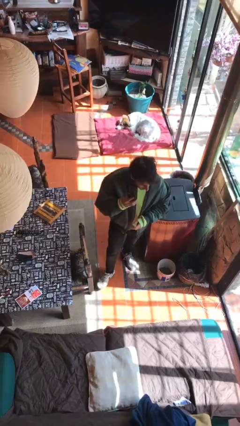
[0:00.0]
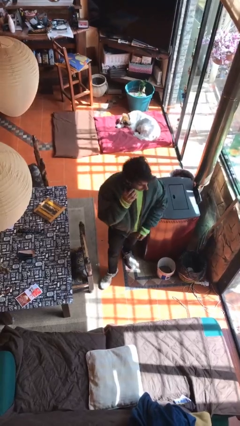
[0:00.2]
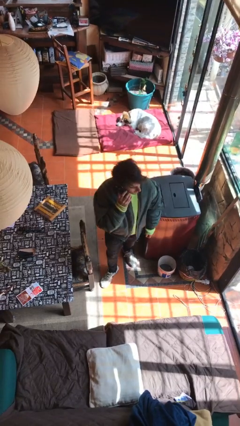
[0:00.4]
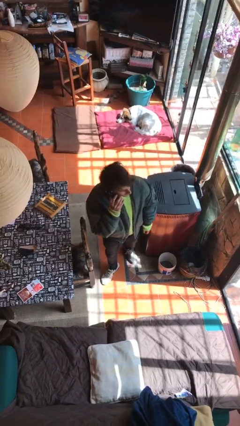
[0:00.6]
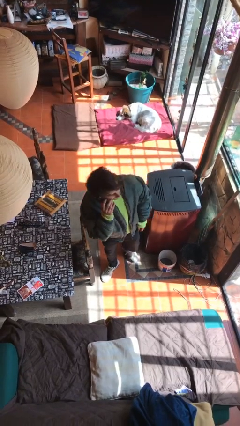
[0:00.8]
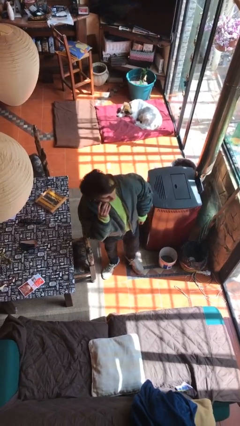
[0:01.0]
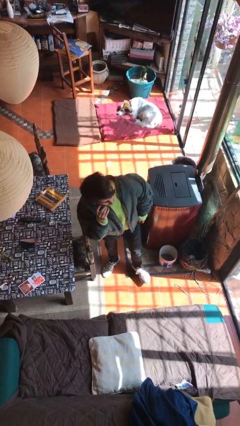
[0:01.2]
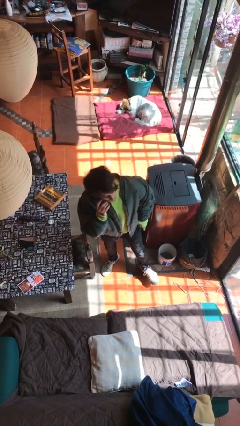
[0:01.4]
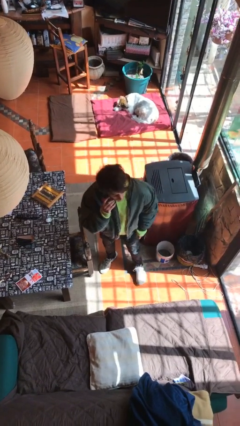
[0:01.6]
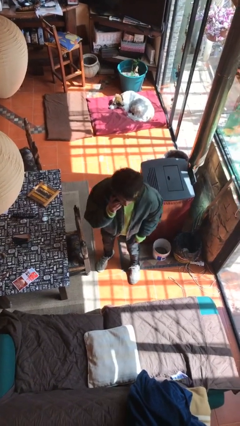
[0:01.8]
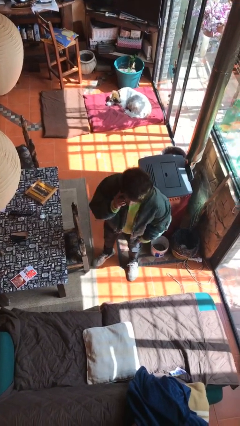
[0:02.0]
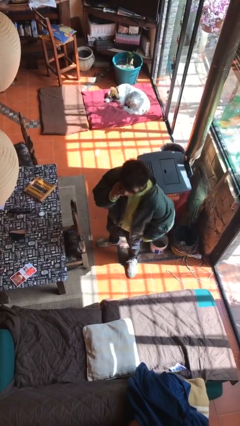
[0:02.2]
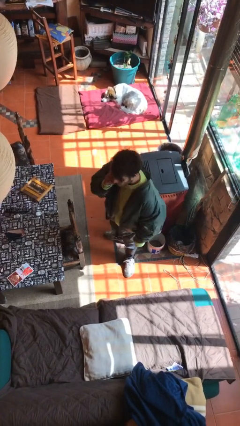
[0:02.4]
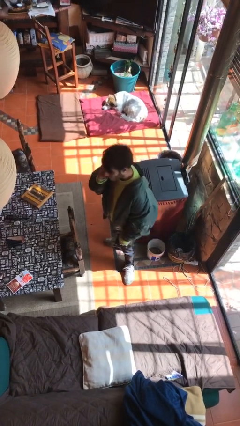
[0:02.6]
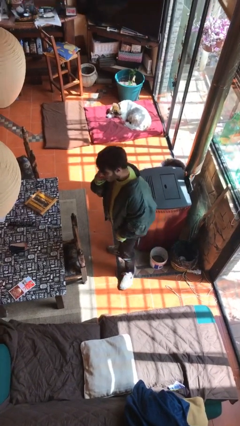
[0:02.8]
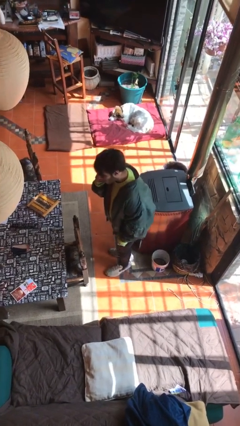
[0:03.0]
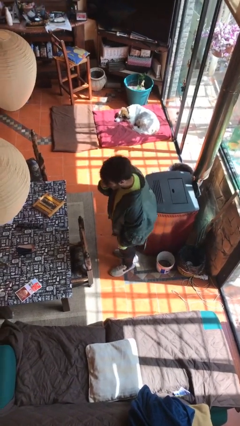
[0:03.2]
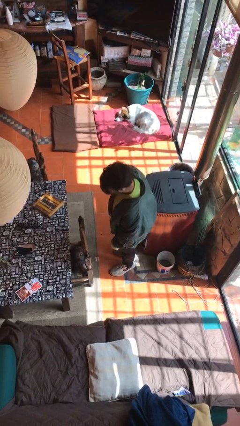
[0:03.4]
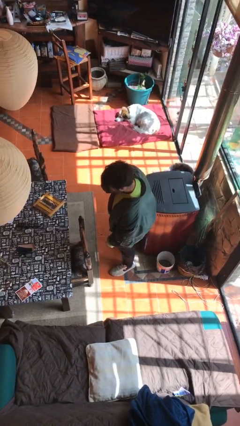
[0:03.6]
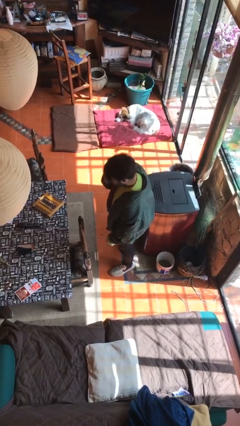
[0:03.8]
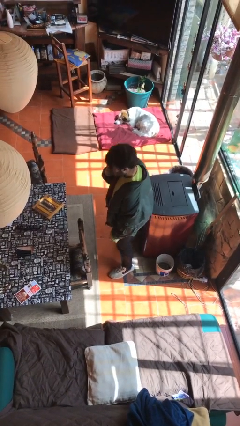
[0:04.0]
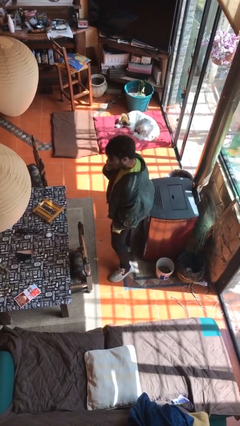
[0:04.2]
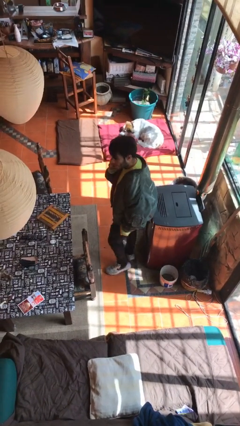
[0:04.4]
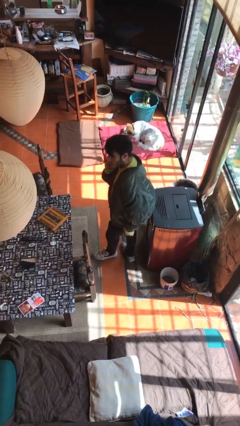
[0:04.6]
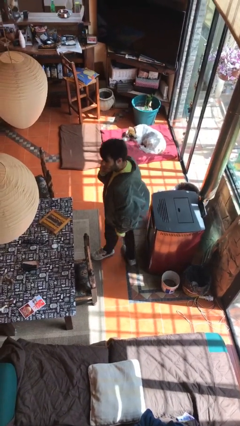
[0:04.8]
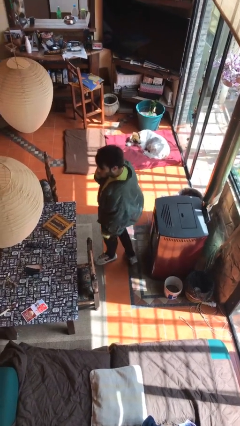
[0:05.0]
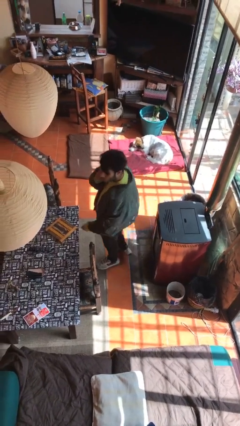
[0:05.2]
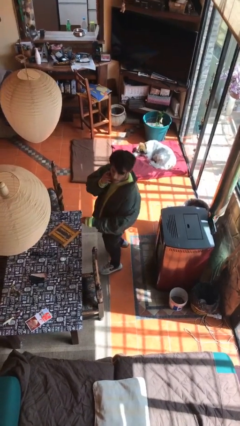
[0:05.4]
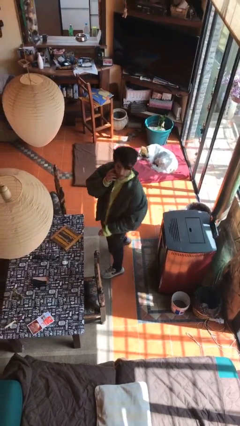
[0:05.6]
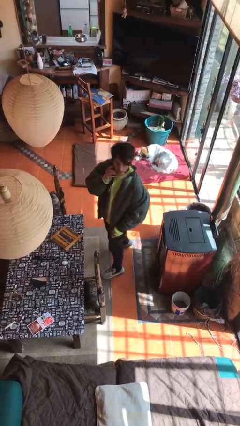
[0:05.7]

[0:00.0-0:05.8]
person talks on phone

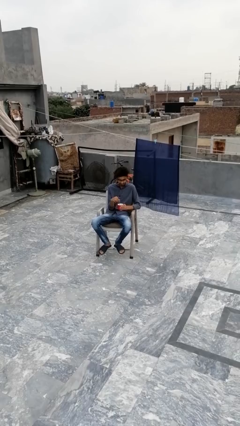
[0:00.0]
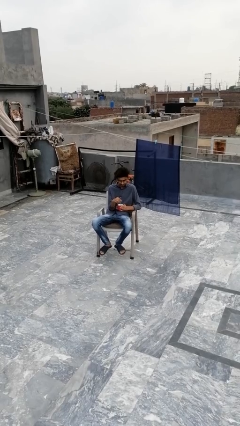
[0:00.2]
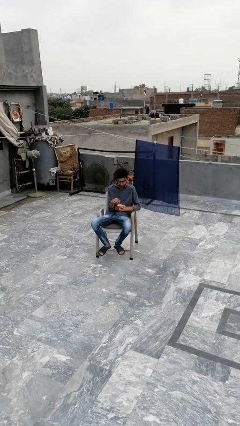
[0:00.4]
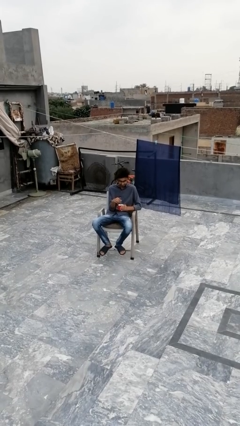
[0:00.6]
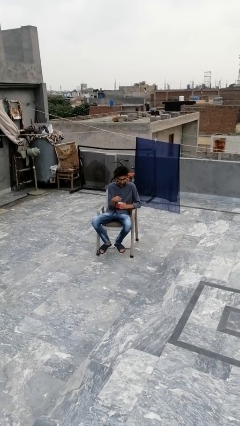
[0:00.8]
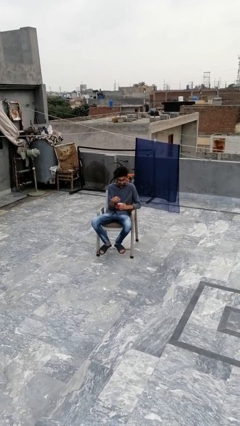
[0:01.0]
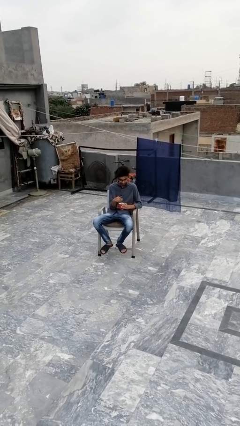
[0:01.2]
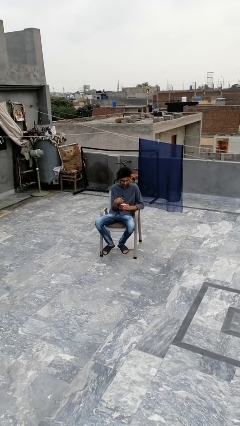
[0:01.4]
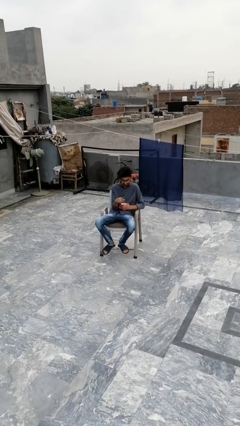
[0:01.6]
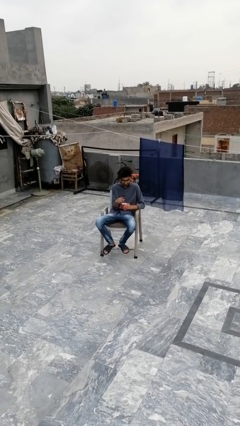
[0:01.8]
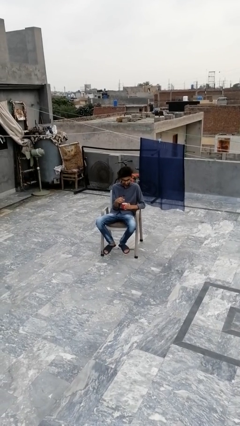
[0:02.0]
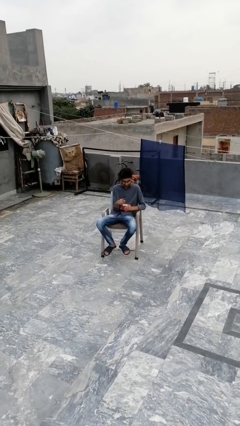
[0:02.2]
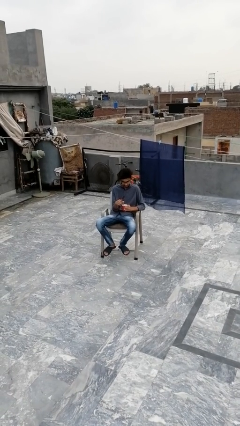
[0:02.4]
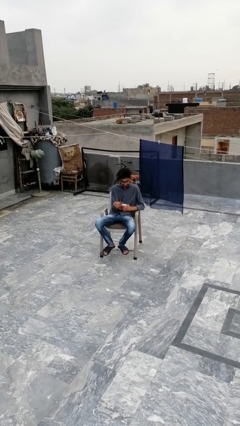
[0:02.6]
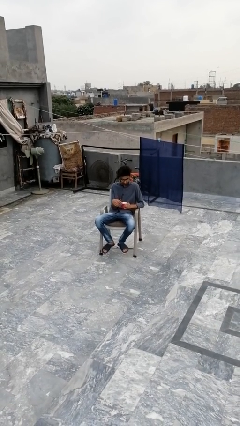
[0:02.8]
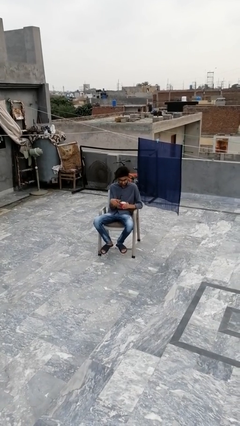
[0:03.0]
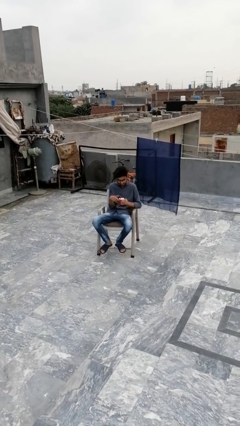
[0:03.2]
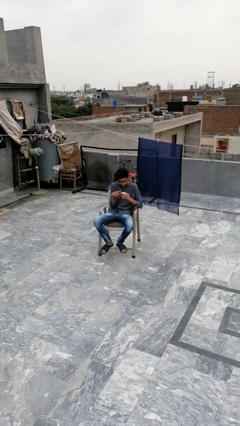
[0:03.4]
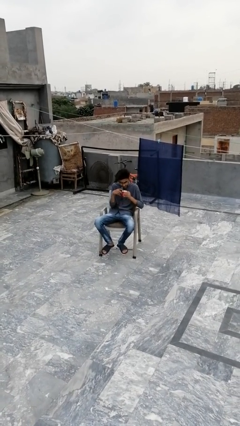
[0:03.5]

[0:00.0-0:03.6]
person stirs mug

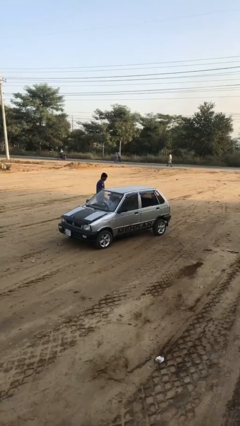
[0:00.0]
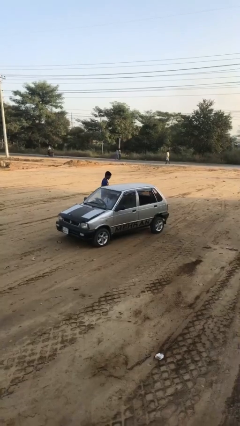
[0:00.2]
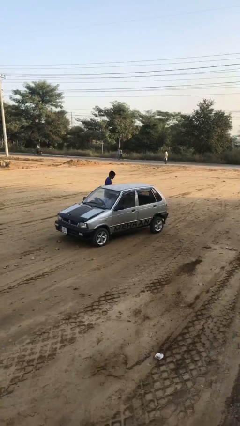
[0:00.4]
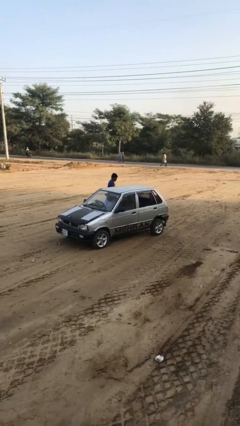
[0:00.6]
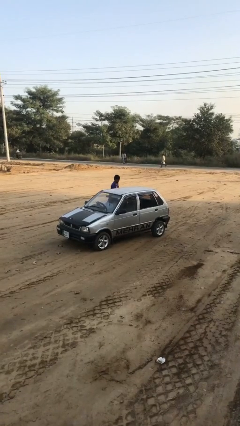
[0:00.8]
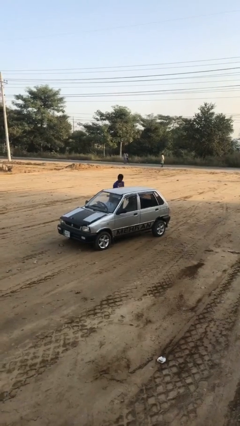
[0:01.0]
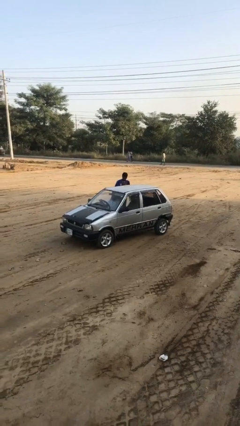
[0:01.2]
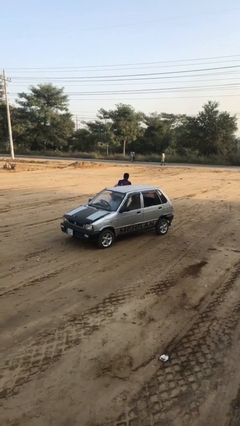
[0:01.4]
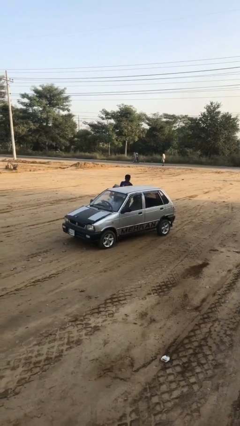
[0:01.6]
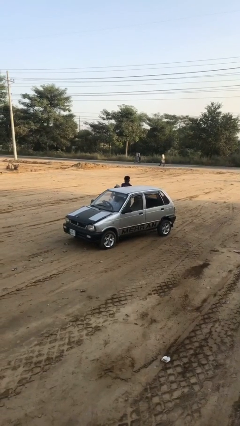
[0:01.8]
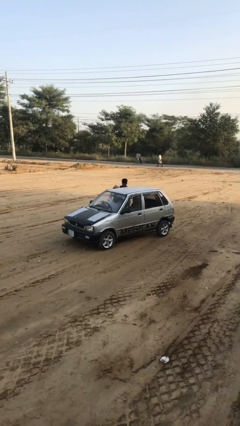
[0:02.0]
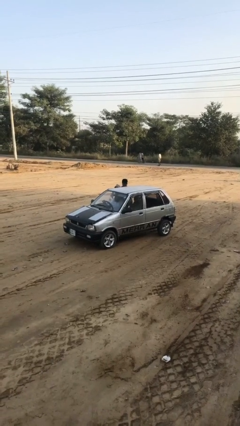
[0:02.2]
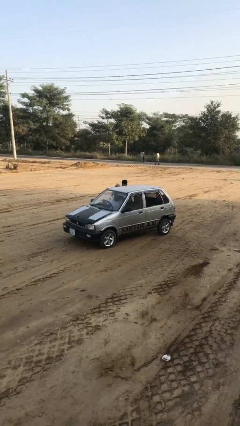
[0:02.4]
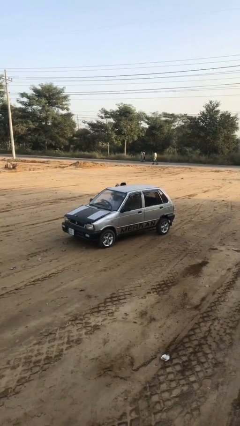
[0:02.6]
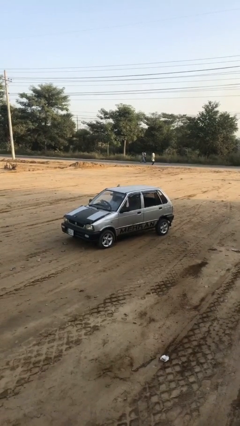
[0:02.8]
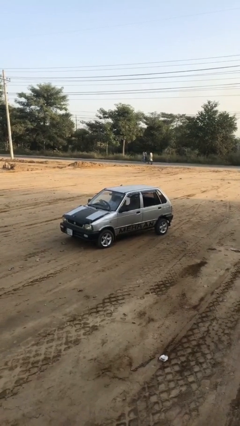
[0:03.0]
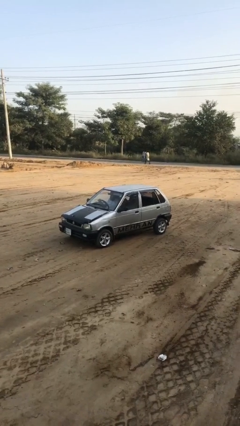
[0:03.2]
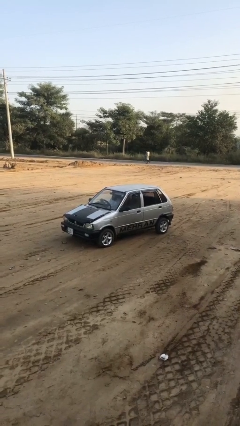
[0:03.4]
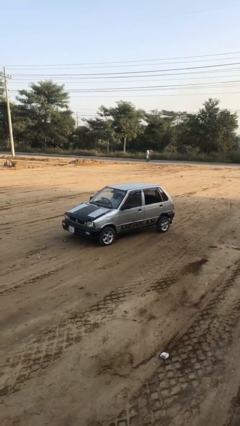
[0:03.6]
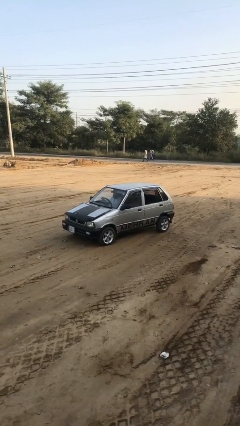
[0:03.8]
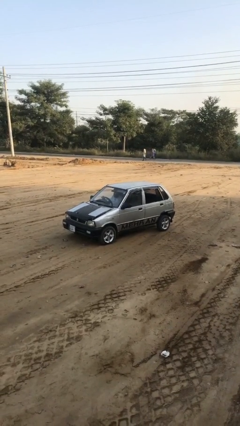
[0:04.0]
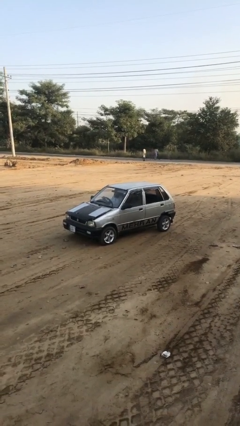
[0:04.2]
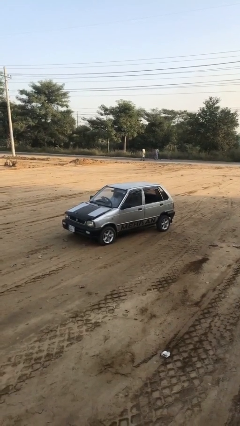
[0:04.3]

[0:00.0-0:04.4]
car picks up person

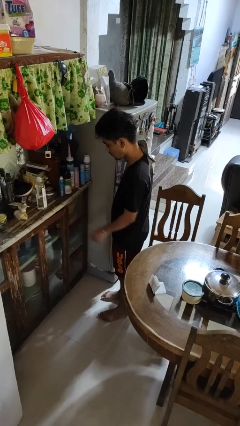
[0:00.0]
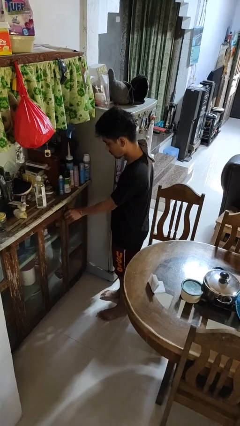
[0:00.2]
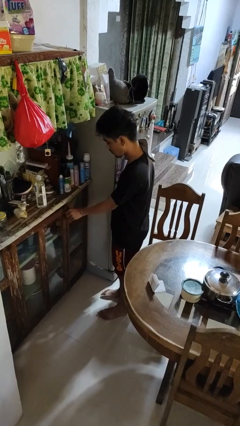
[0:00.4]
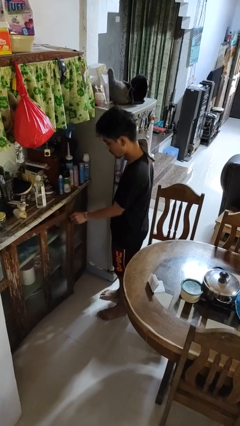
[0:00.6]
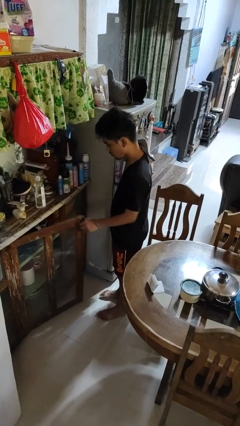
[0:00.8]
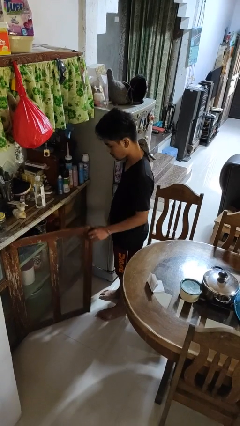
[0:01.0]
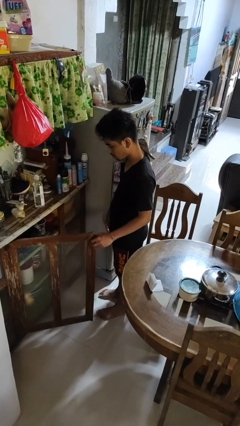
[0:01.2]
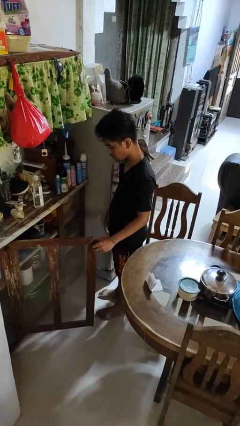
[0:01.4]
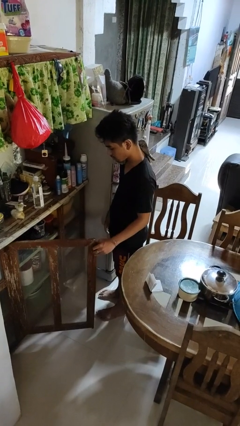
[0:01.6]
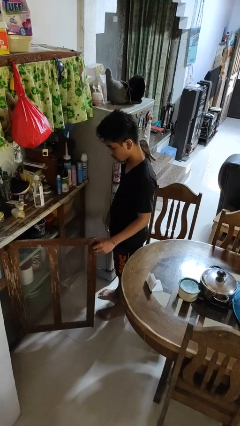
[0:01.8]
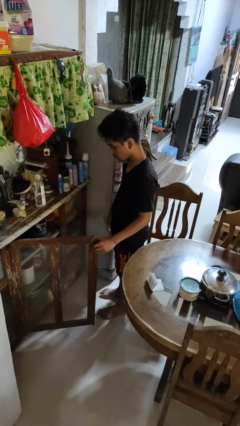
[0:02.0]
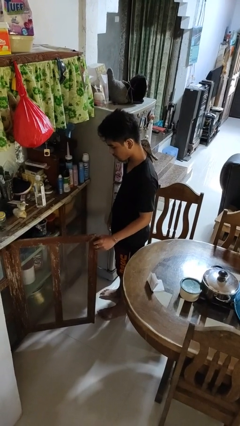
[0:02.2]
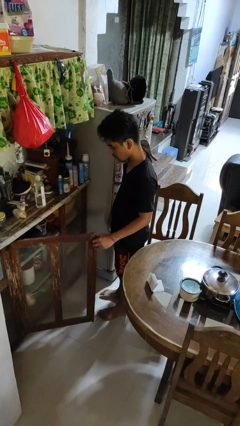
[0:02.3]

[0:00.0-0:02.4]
person opens cabinet

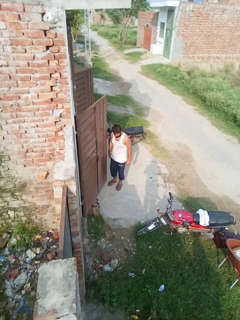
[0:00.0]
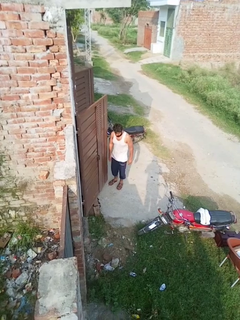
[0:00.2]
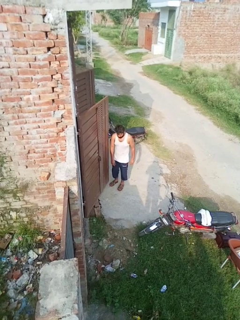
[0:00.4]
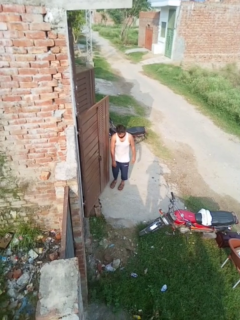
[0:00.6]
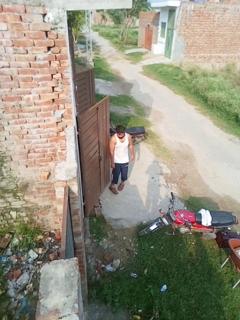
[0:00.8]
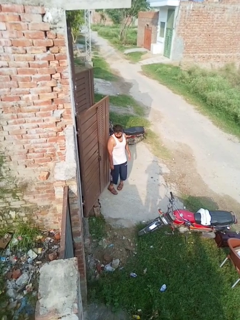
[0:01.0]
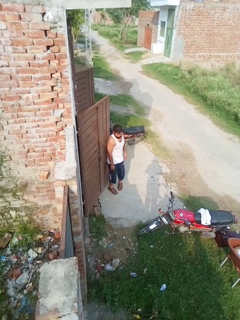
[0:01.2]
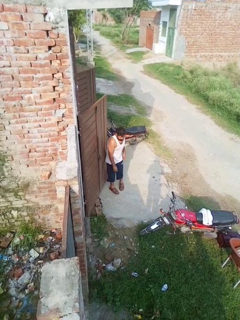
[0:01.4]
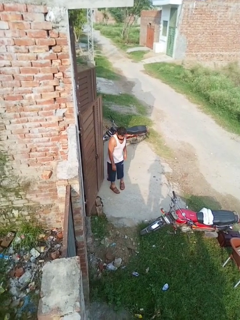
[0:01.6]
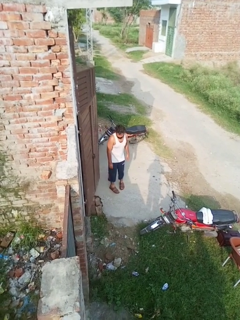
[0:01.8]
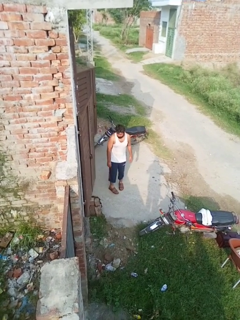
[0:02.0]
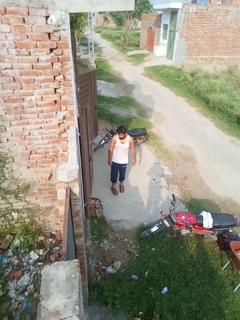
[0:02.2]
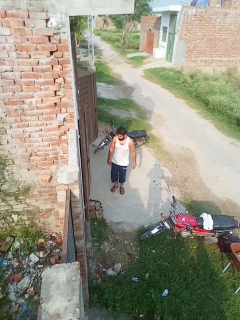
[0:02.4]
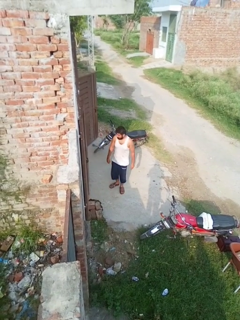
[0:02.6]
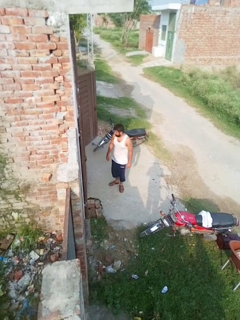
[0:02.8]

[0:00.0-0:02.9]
person closes door with hip
